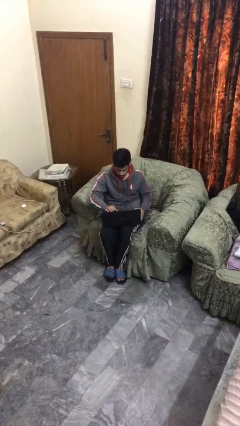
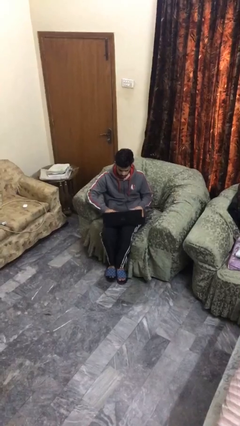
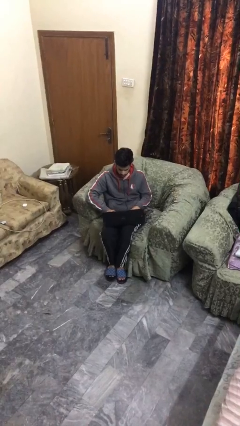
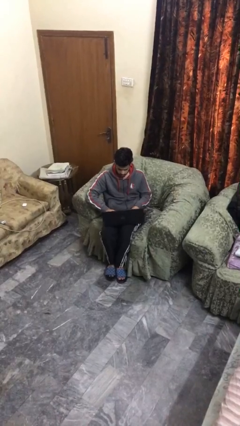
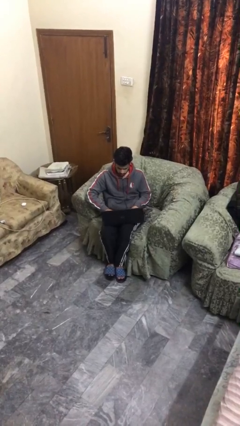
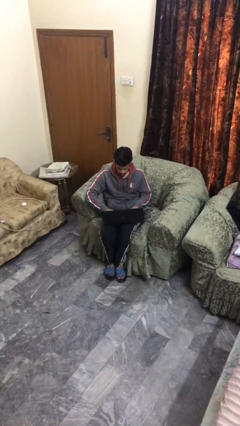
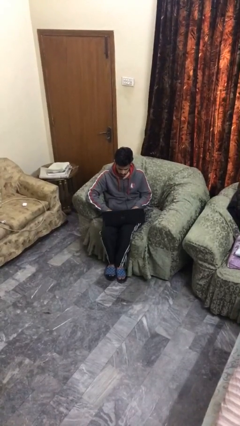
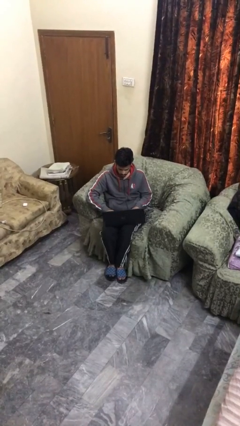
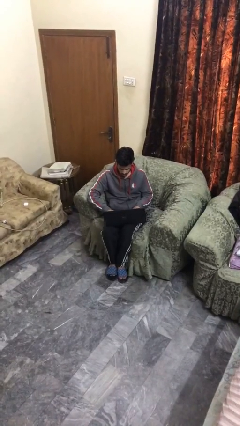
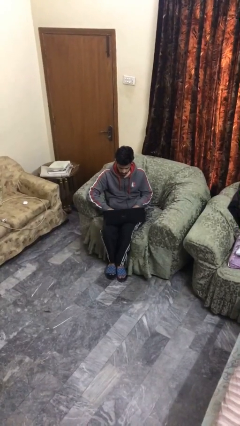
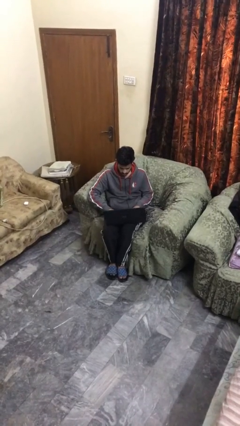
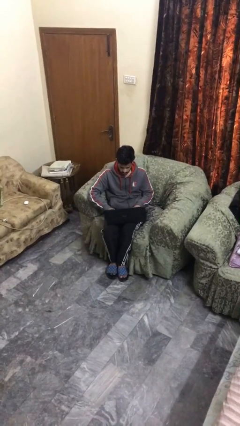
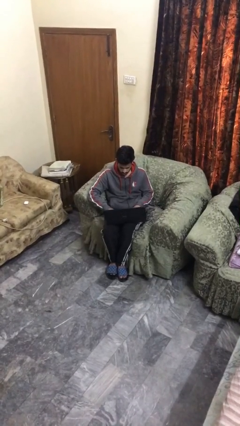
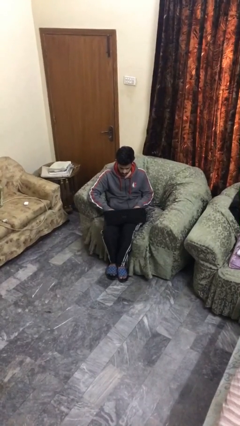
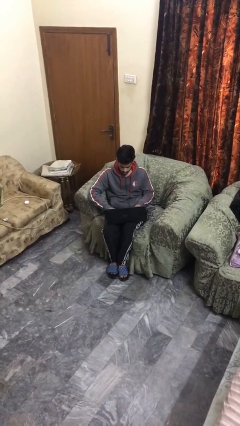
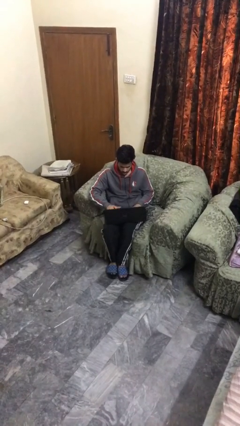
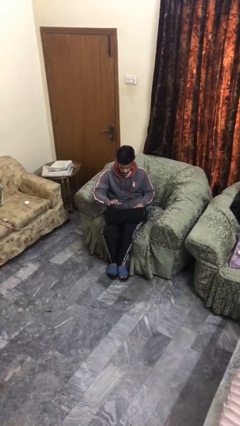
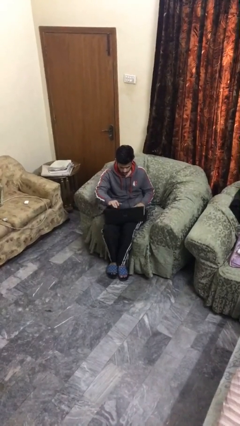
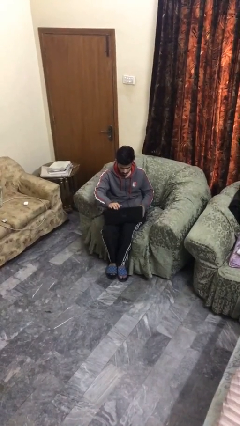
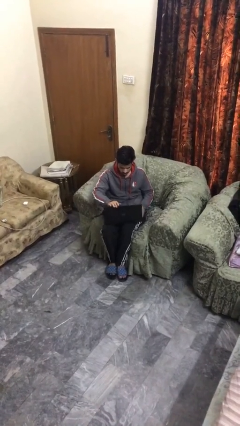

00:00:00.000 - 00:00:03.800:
person interacts with laptop

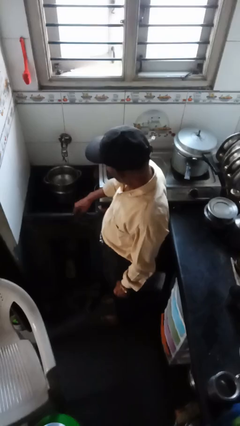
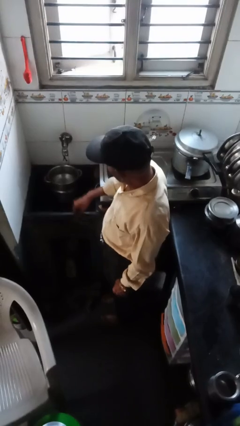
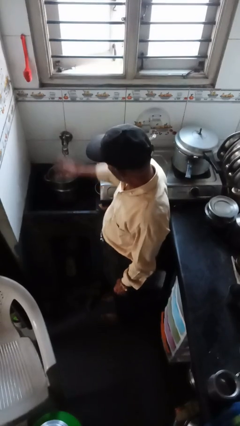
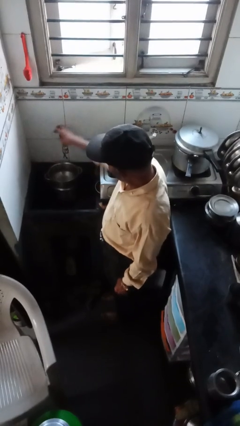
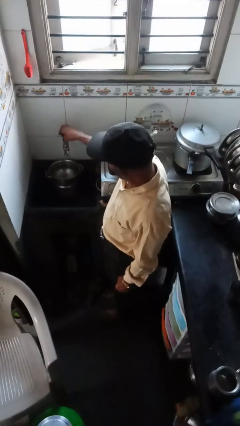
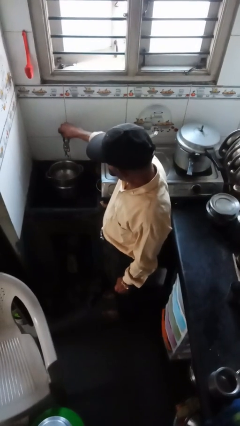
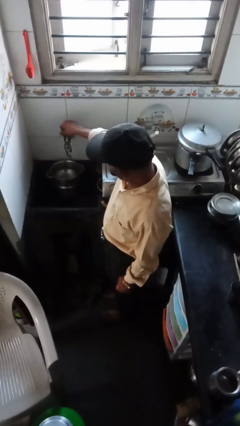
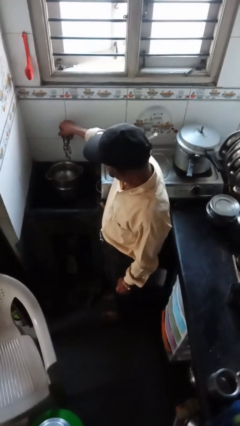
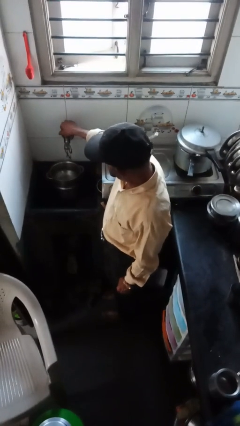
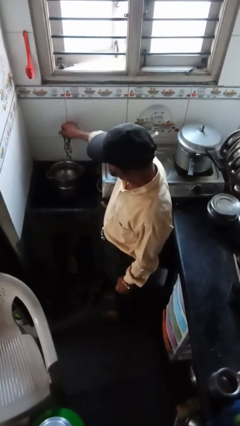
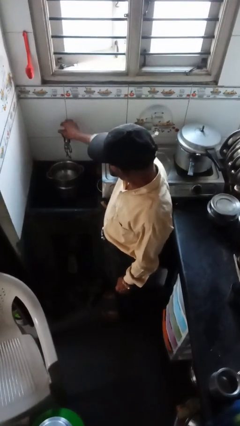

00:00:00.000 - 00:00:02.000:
person turns off faucet

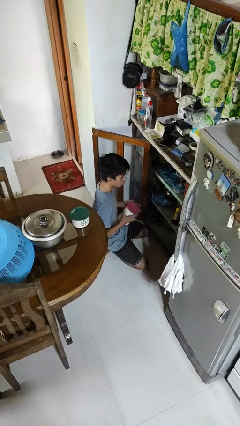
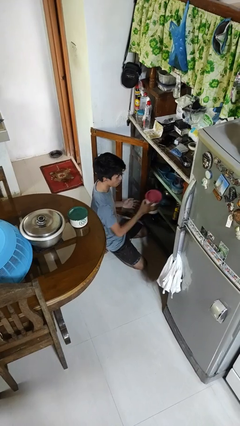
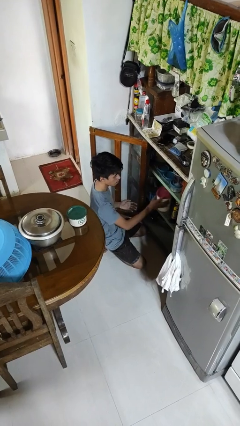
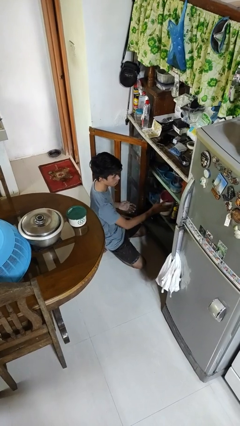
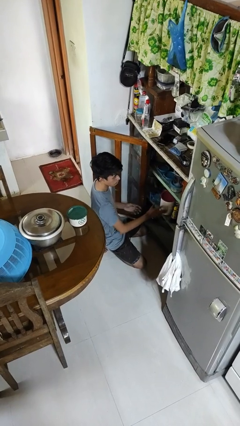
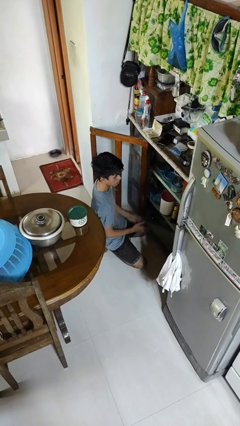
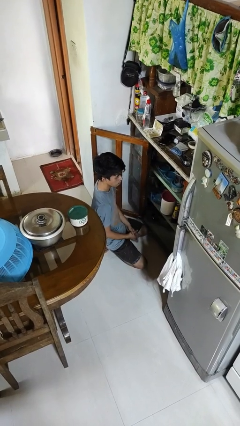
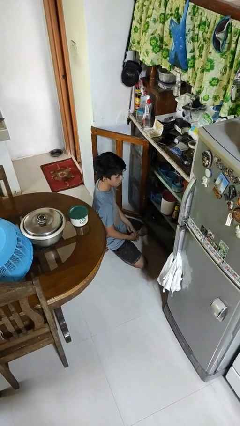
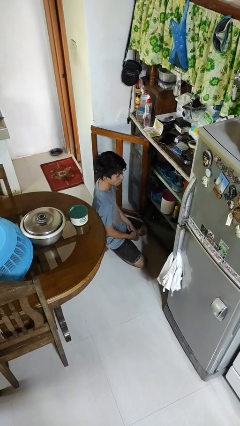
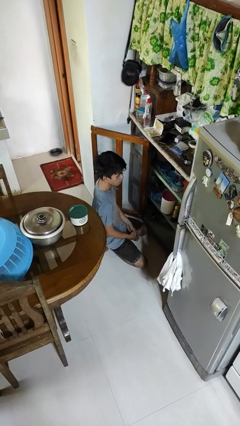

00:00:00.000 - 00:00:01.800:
person puts down object into cabinet

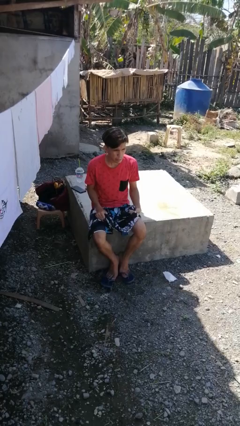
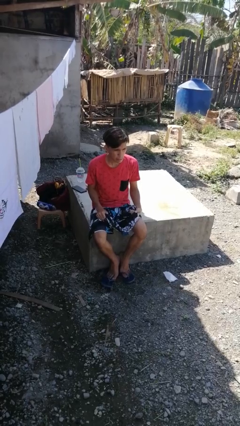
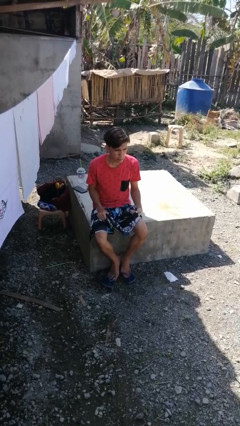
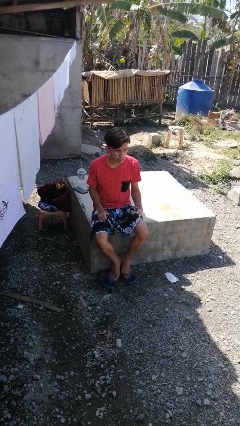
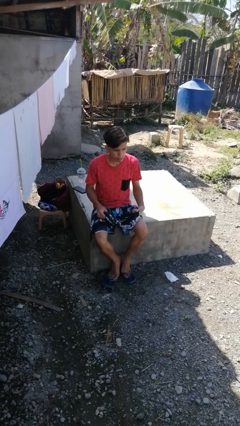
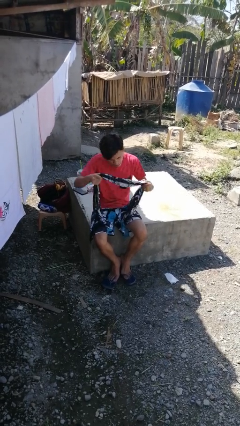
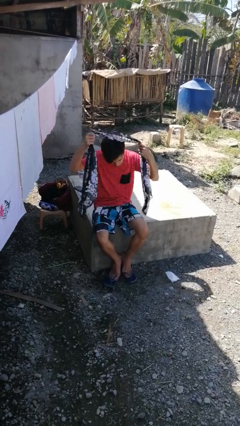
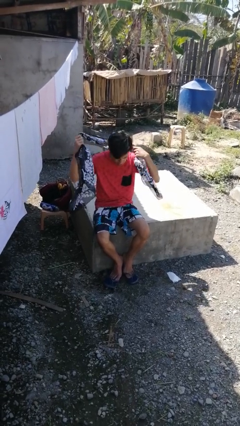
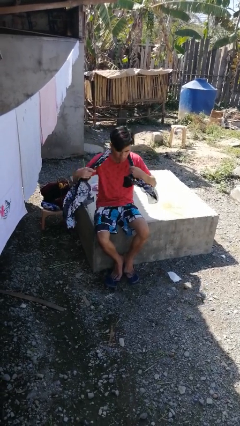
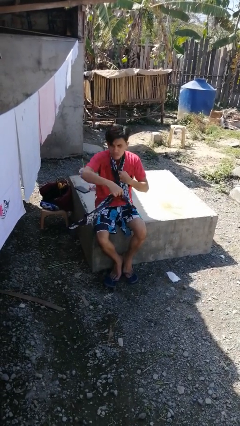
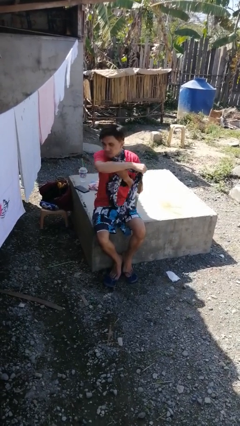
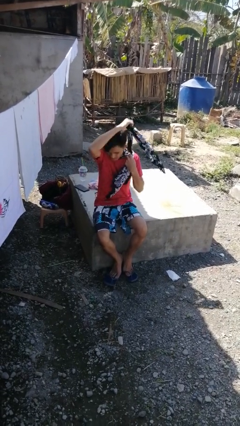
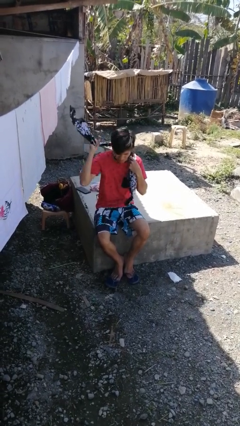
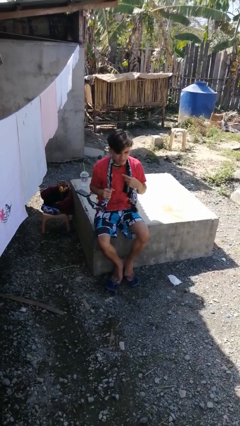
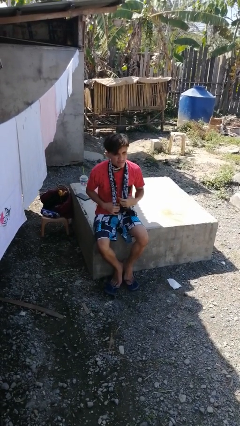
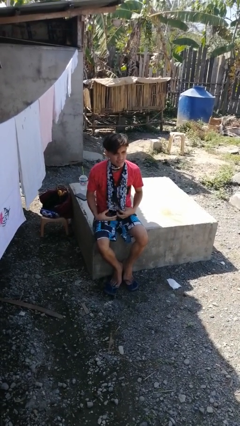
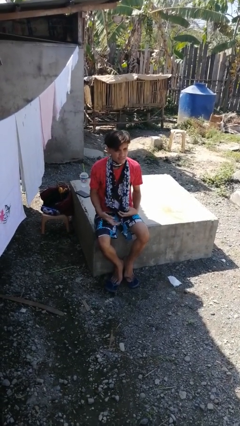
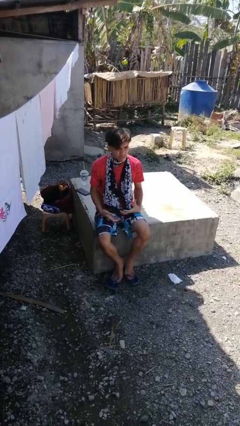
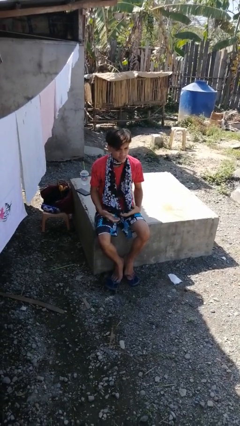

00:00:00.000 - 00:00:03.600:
person puts on scarf

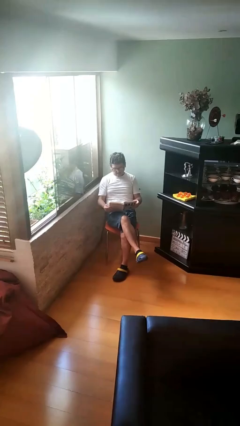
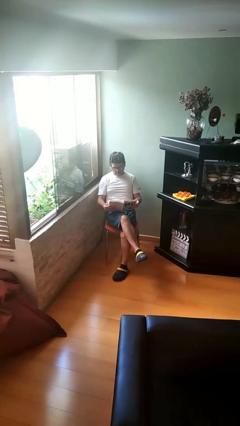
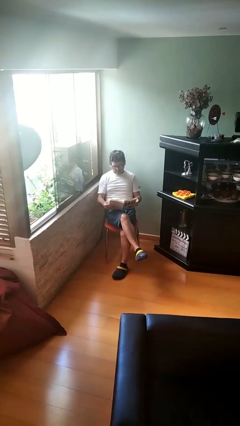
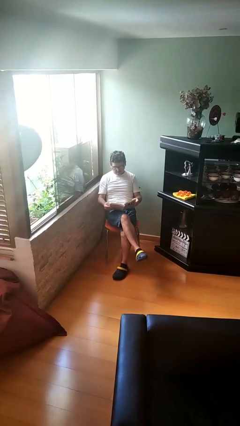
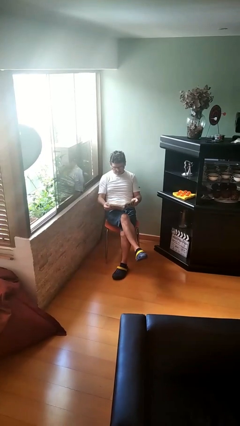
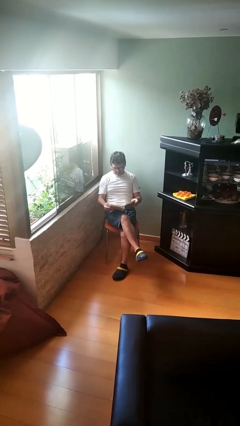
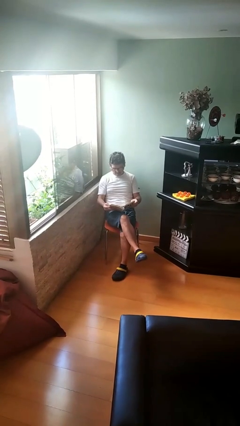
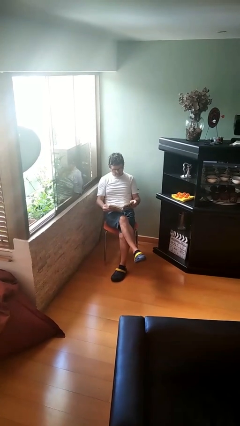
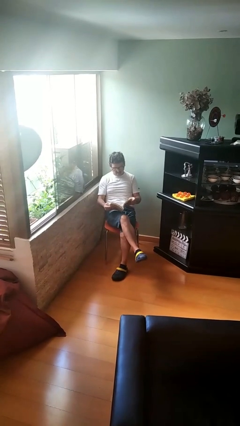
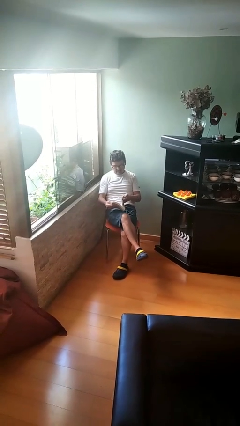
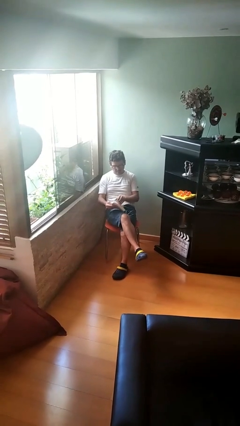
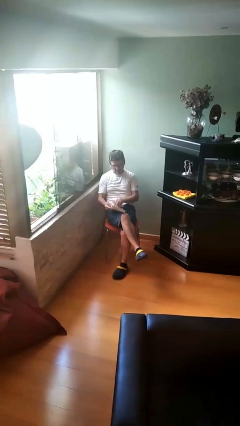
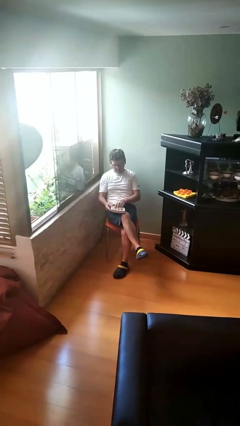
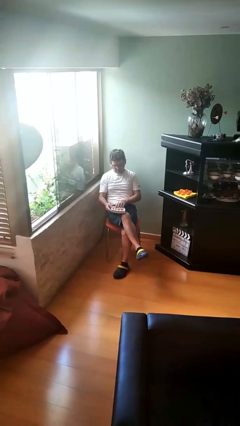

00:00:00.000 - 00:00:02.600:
person reads document

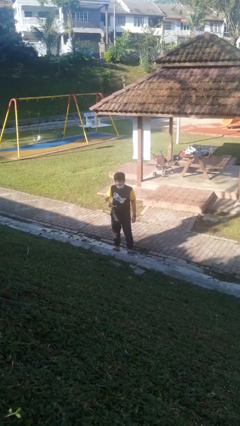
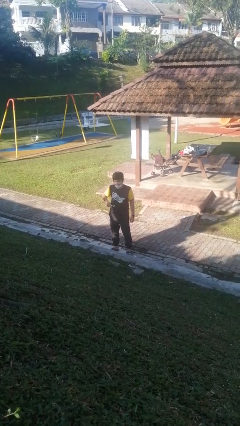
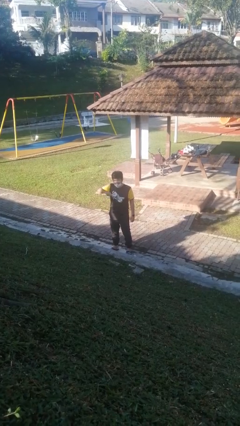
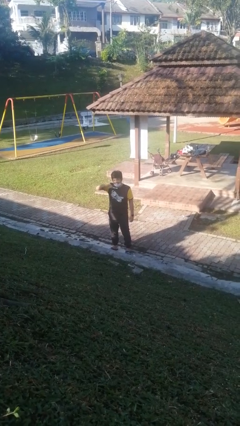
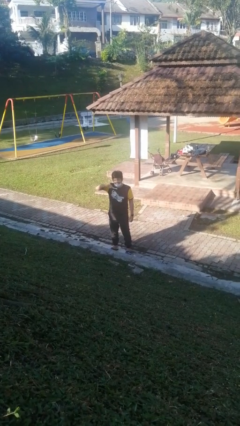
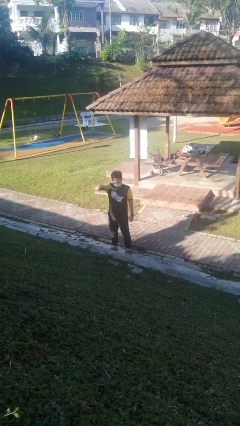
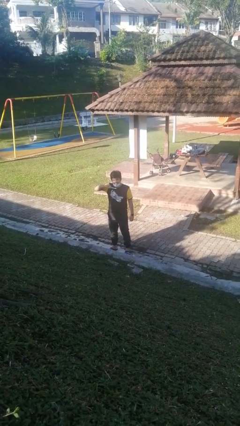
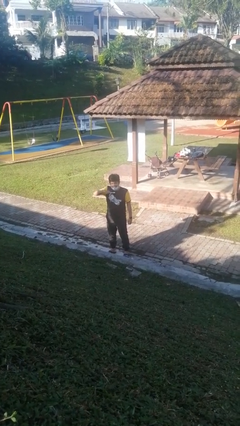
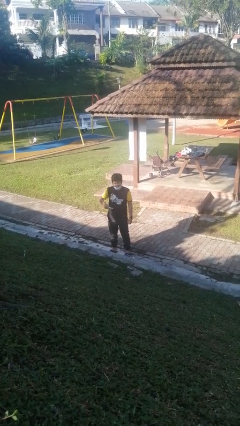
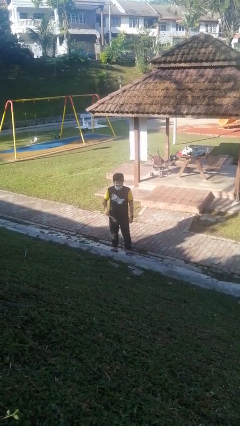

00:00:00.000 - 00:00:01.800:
person brushes teeth

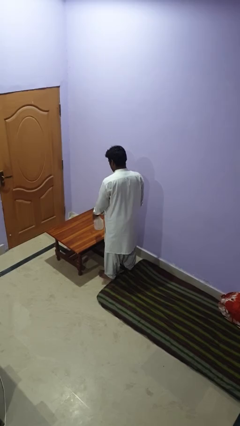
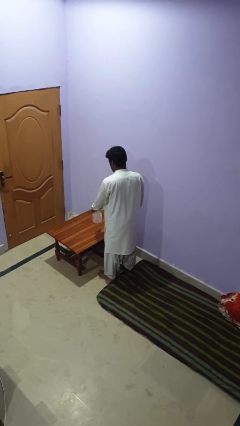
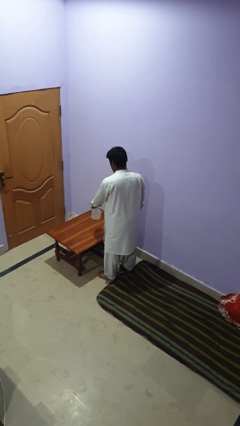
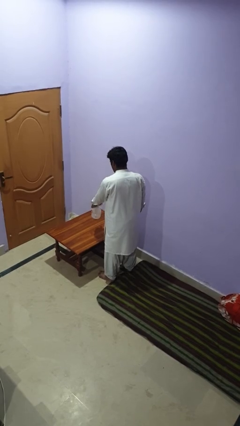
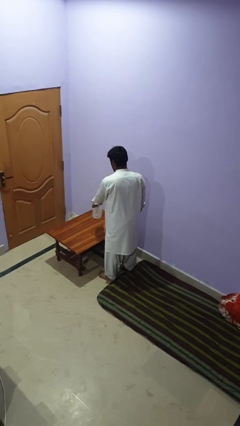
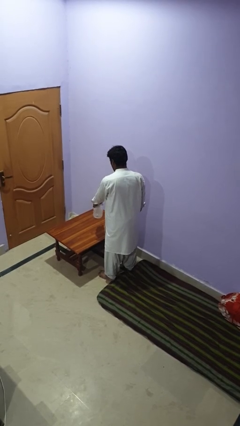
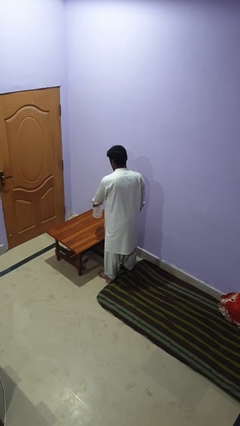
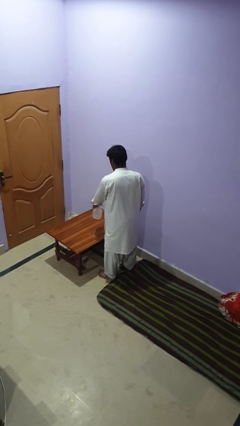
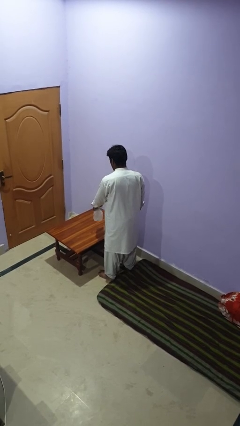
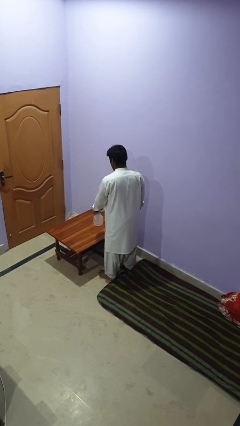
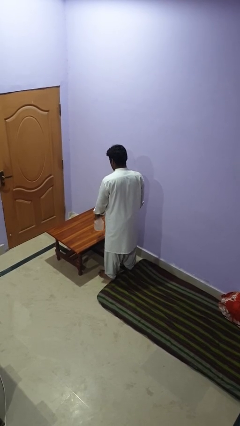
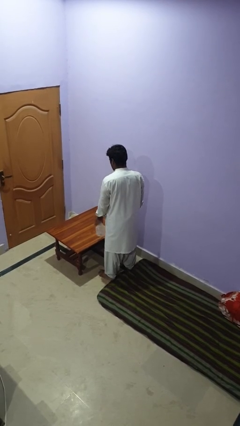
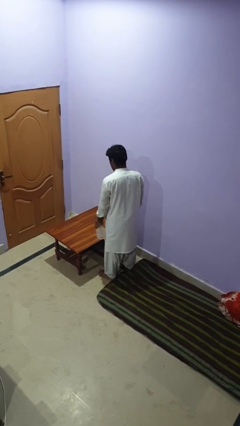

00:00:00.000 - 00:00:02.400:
person sprays from bottle
